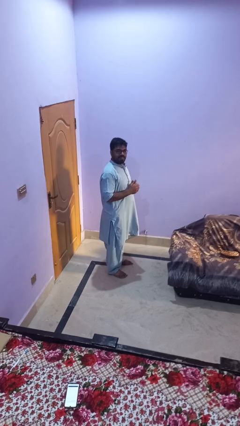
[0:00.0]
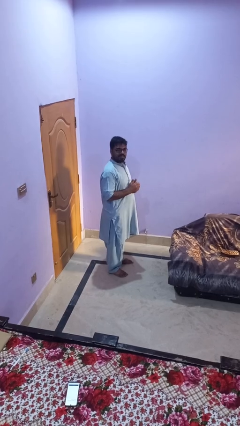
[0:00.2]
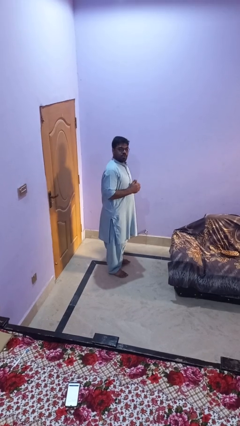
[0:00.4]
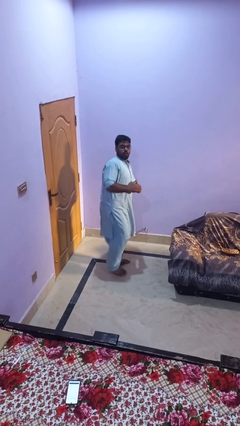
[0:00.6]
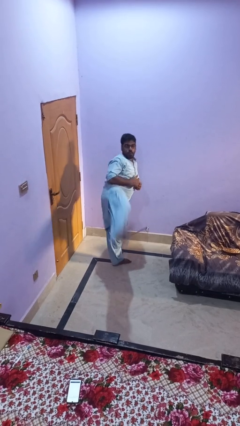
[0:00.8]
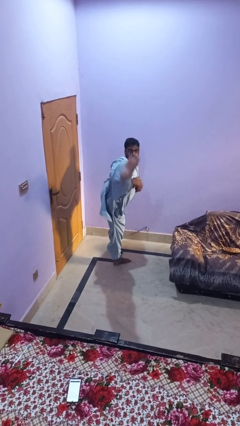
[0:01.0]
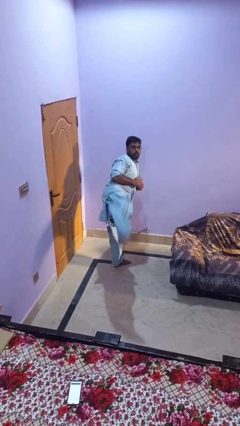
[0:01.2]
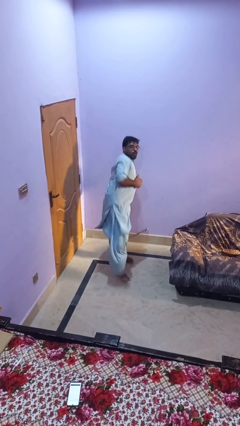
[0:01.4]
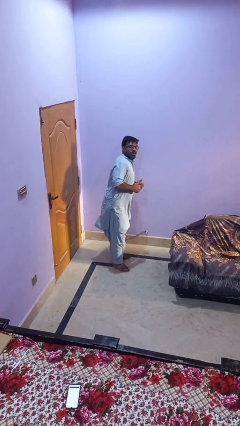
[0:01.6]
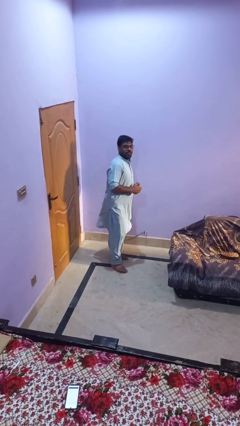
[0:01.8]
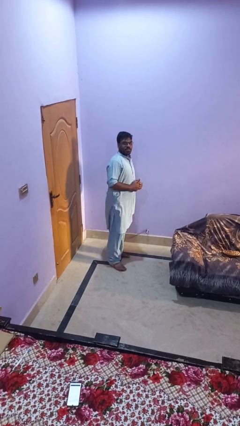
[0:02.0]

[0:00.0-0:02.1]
person karate kicks

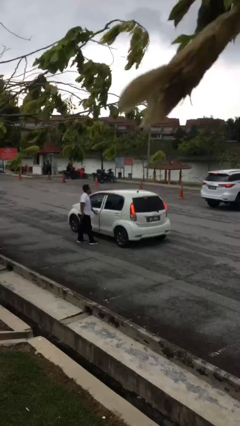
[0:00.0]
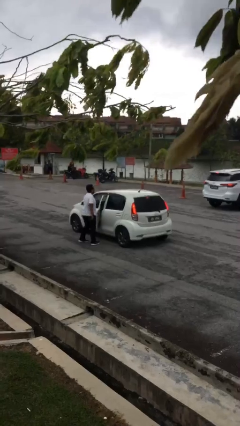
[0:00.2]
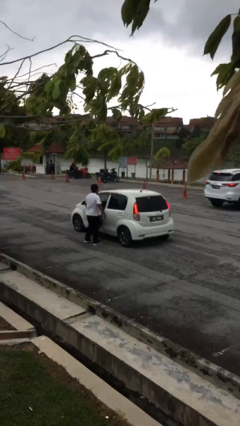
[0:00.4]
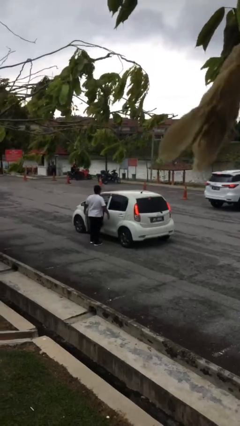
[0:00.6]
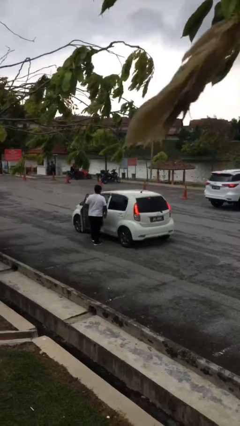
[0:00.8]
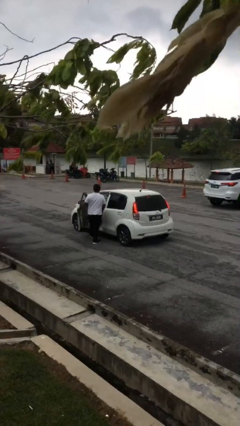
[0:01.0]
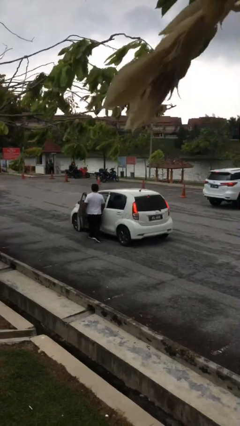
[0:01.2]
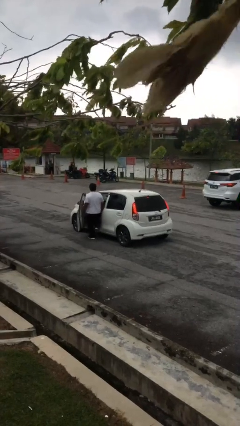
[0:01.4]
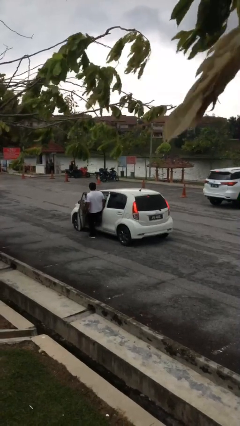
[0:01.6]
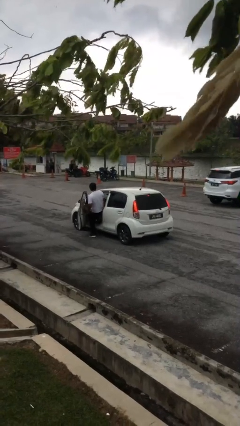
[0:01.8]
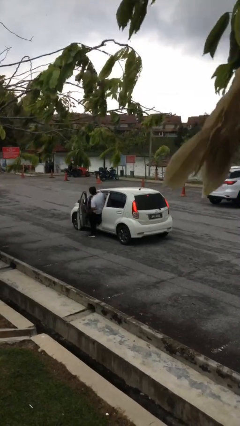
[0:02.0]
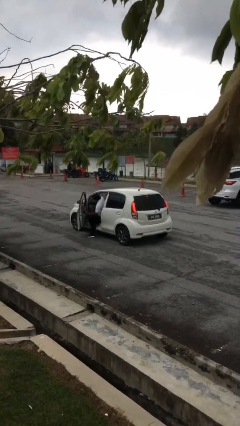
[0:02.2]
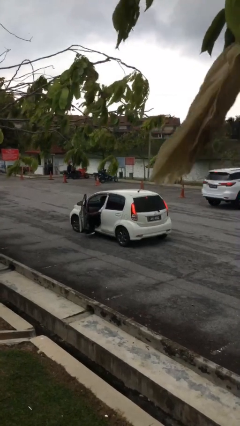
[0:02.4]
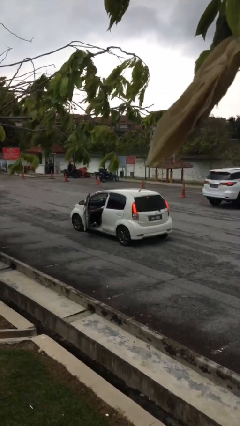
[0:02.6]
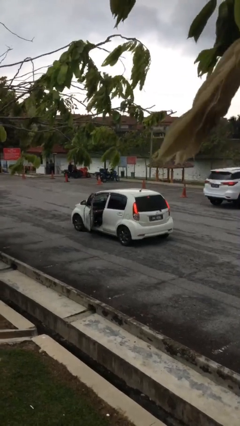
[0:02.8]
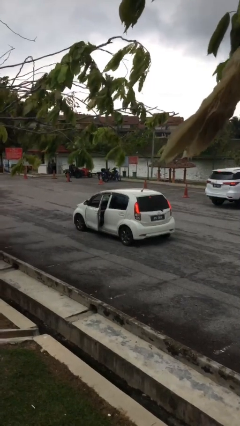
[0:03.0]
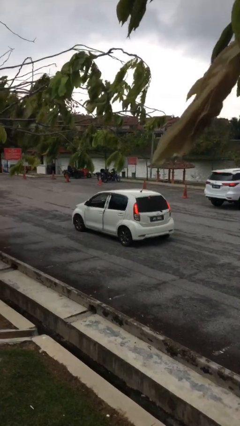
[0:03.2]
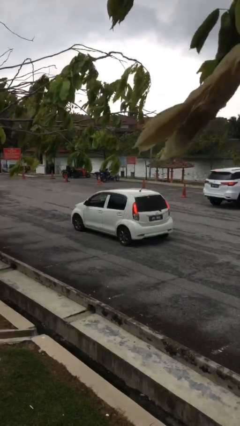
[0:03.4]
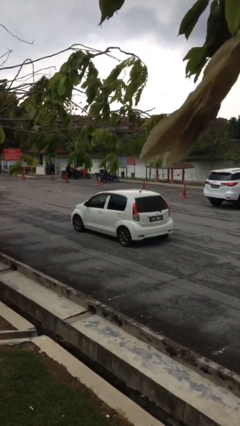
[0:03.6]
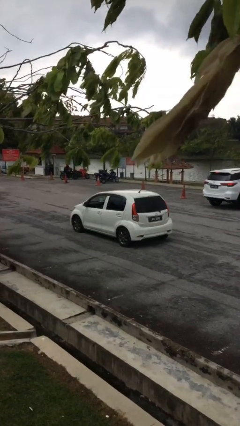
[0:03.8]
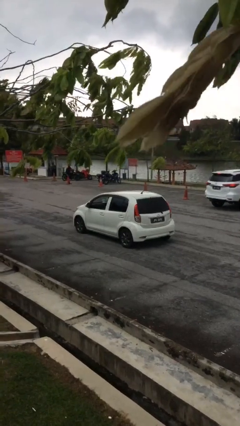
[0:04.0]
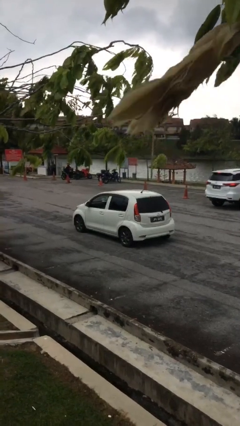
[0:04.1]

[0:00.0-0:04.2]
car picks up person

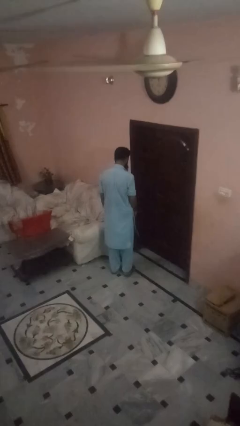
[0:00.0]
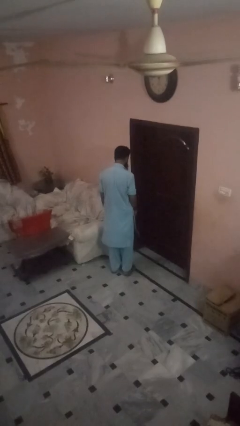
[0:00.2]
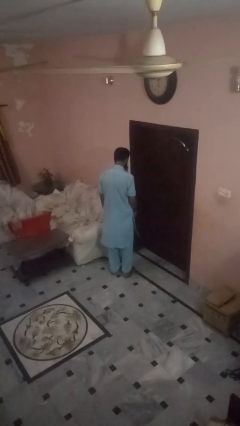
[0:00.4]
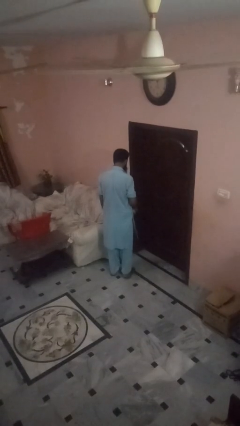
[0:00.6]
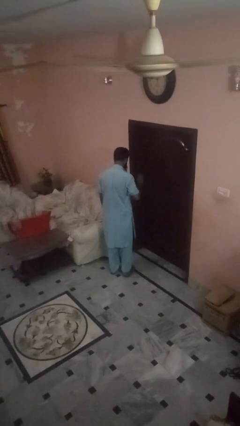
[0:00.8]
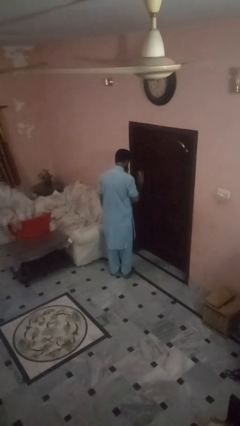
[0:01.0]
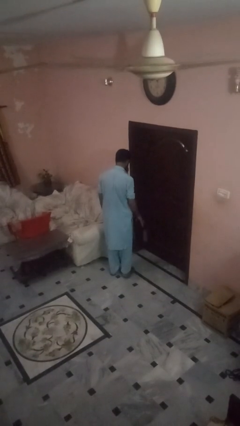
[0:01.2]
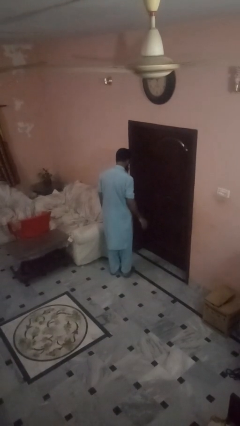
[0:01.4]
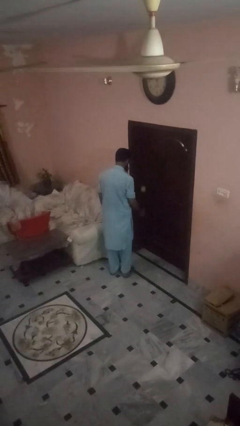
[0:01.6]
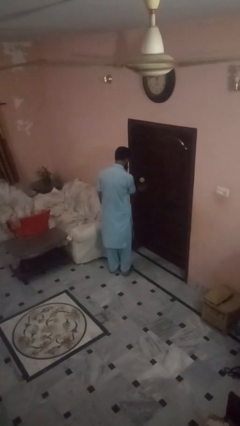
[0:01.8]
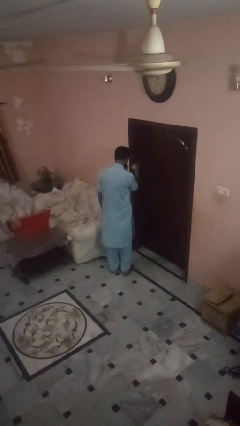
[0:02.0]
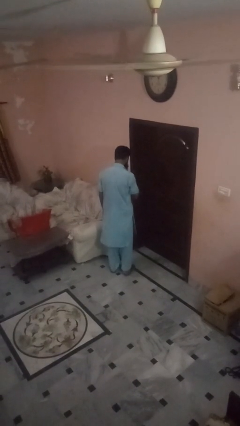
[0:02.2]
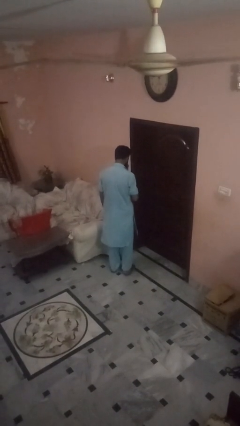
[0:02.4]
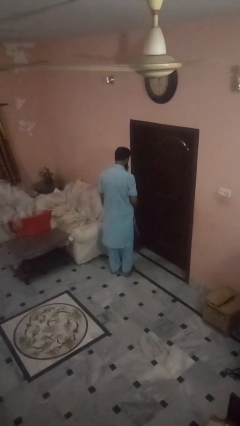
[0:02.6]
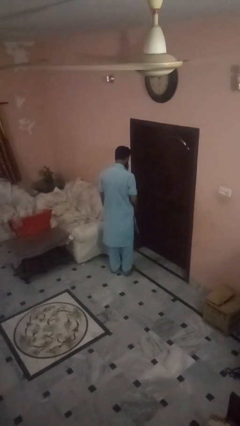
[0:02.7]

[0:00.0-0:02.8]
person bounces ball on floor

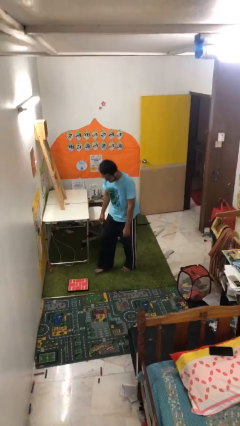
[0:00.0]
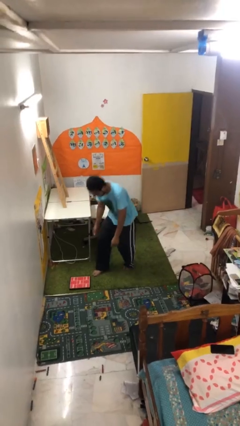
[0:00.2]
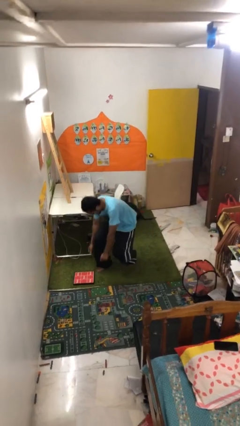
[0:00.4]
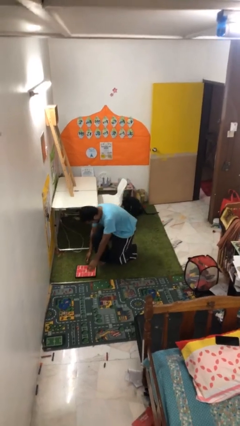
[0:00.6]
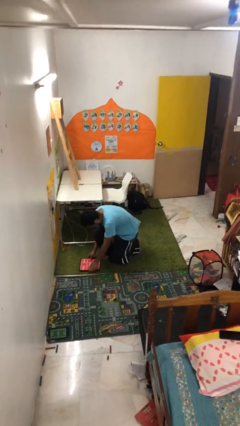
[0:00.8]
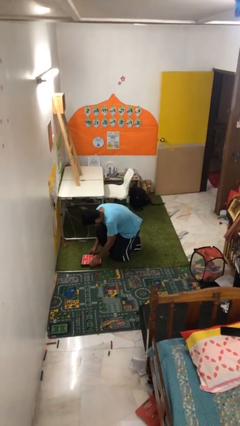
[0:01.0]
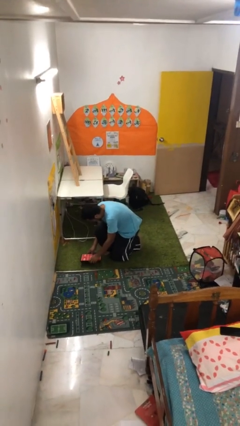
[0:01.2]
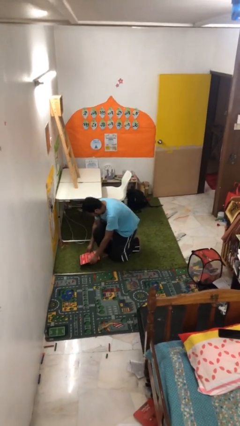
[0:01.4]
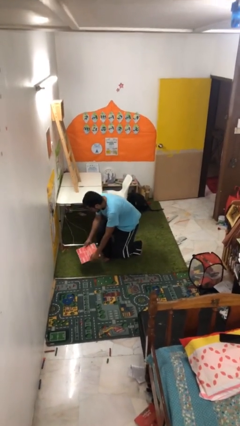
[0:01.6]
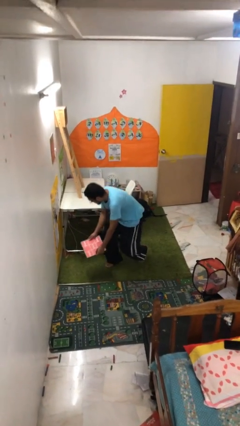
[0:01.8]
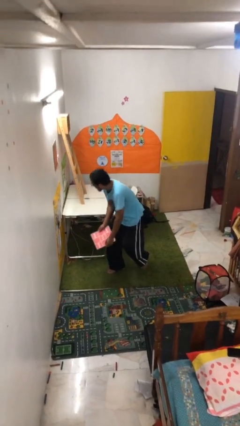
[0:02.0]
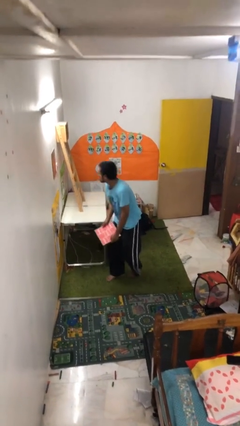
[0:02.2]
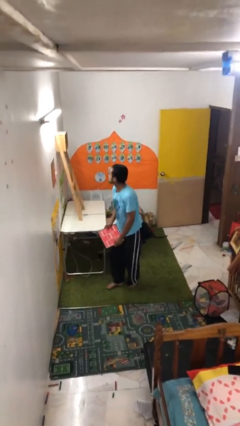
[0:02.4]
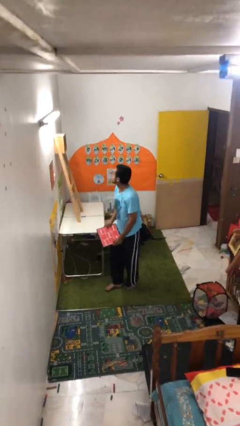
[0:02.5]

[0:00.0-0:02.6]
person picks up object from floor

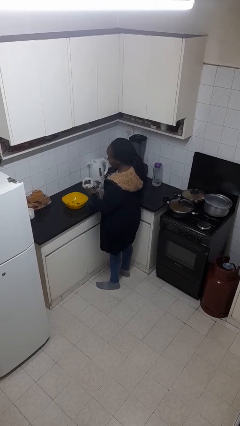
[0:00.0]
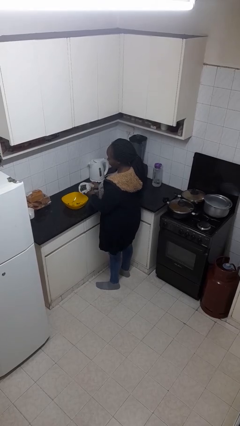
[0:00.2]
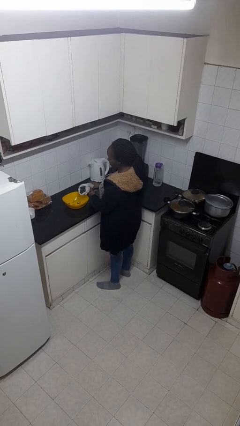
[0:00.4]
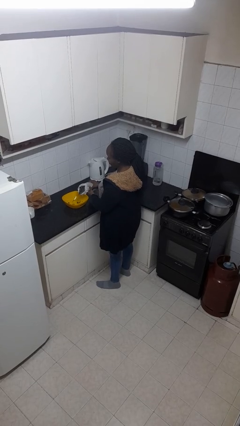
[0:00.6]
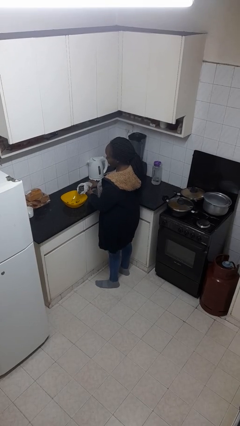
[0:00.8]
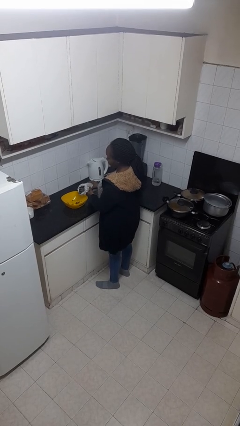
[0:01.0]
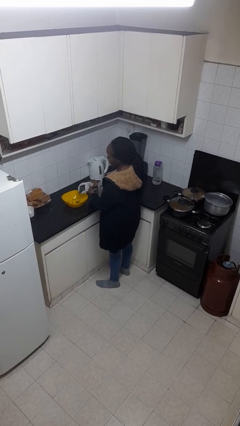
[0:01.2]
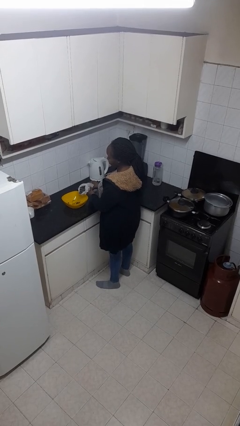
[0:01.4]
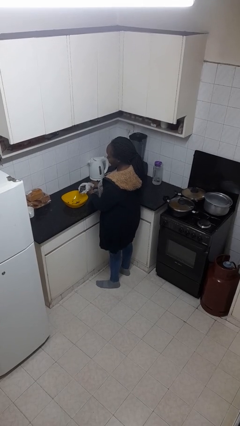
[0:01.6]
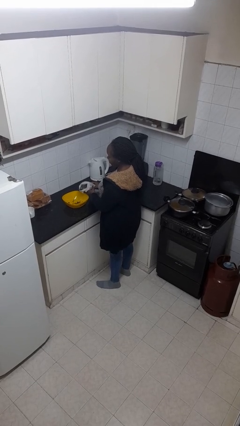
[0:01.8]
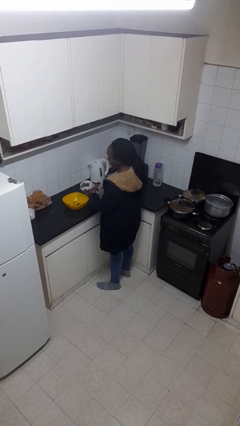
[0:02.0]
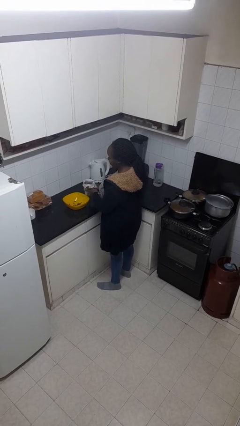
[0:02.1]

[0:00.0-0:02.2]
person pours into bowl

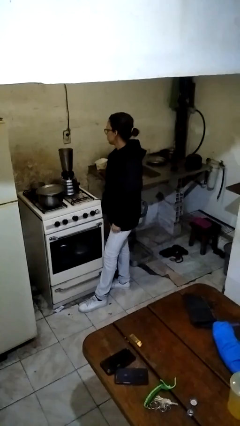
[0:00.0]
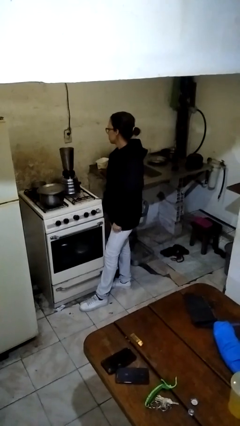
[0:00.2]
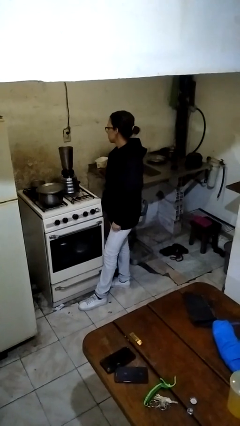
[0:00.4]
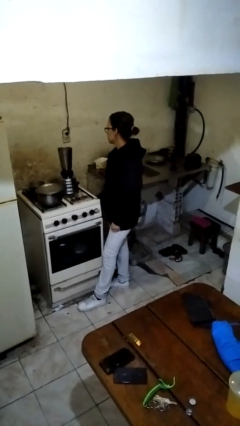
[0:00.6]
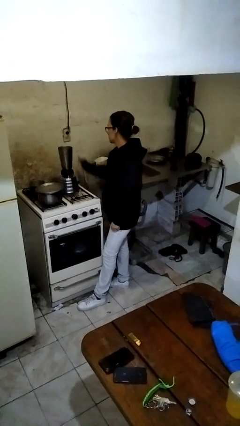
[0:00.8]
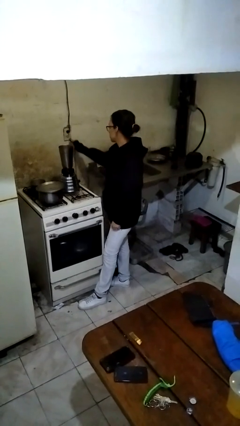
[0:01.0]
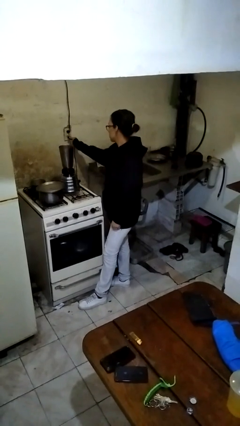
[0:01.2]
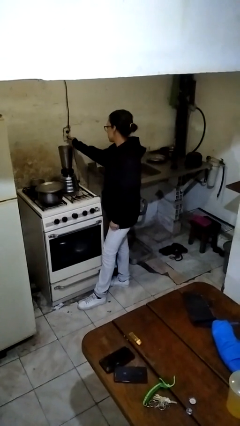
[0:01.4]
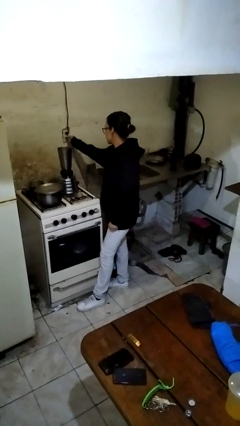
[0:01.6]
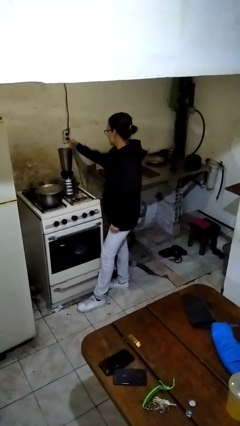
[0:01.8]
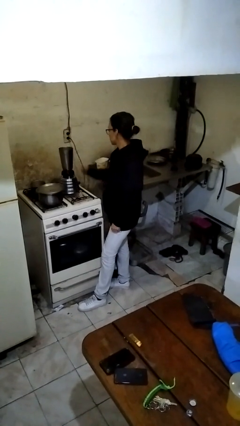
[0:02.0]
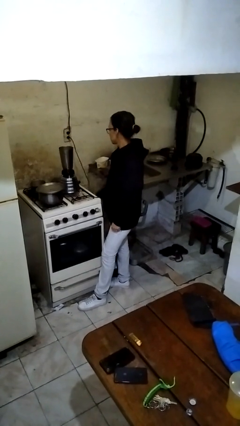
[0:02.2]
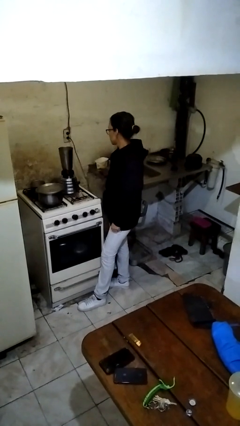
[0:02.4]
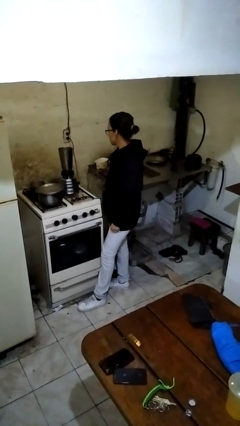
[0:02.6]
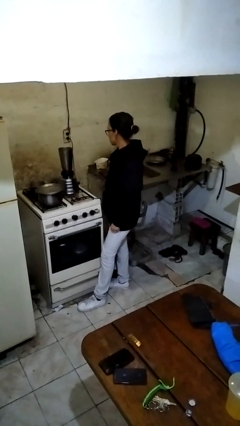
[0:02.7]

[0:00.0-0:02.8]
person plugs into electrical socket

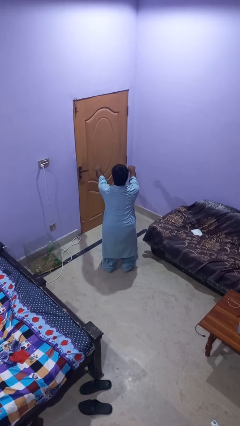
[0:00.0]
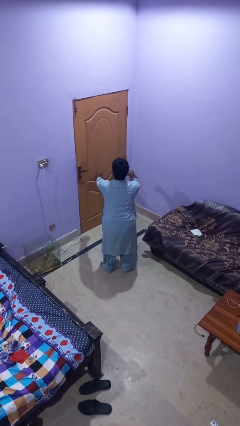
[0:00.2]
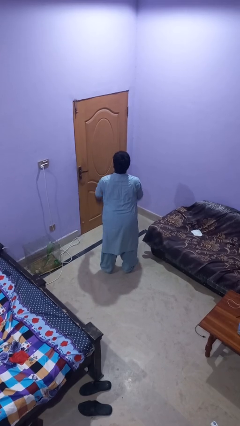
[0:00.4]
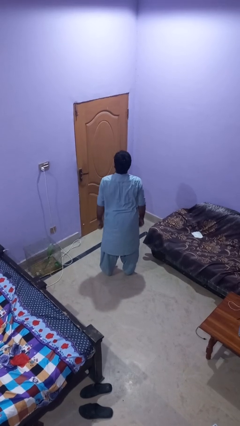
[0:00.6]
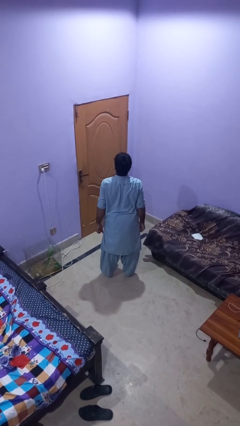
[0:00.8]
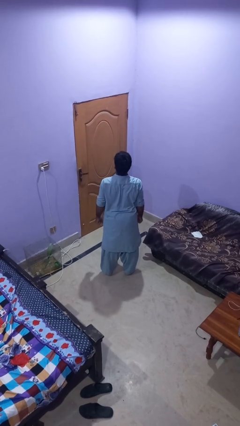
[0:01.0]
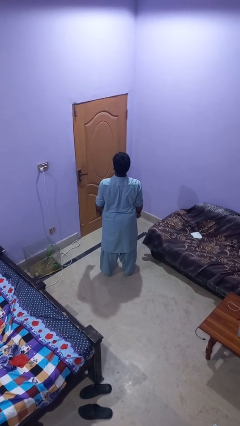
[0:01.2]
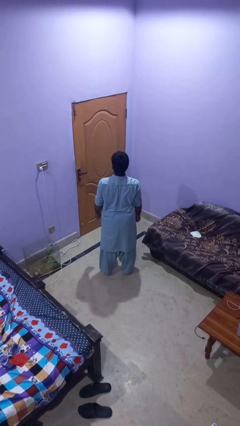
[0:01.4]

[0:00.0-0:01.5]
person stands up
